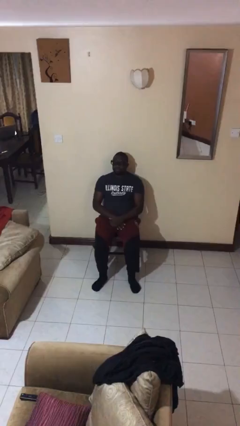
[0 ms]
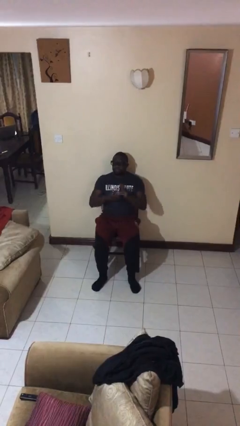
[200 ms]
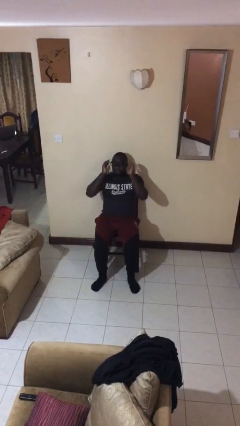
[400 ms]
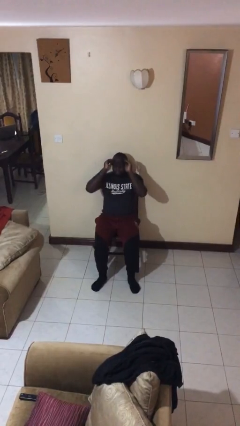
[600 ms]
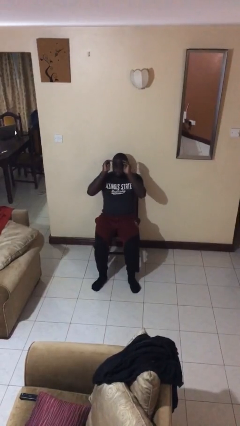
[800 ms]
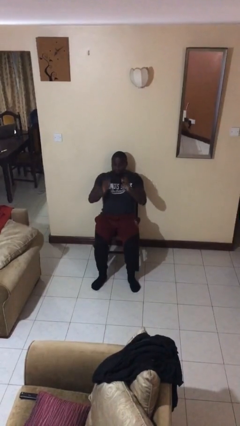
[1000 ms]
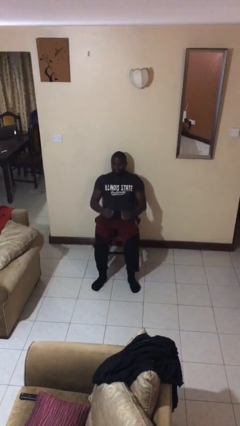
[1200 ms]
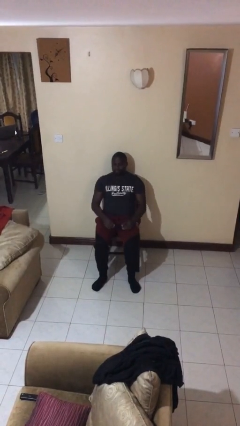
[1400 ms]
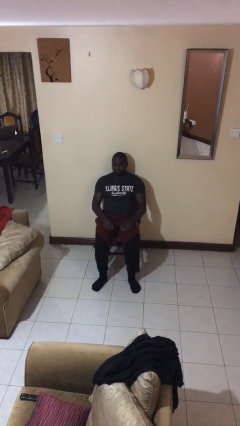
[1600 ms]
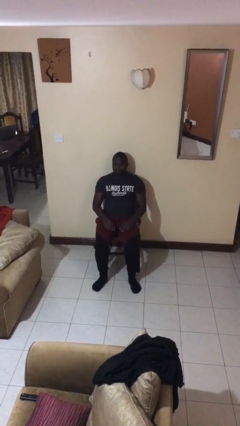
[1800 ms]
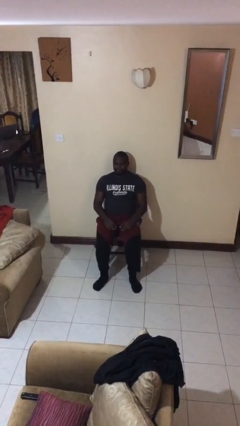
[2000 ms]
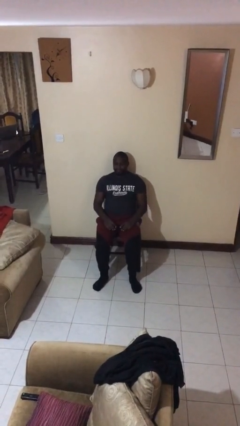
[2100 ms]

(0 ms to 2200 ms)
person takes off glasses

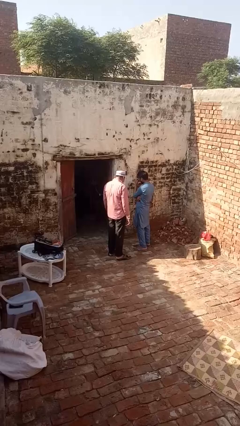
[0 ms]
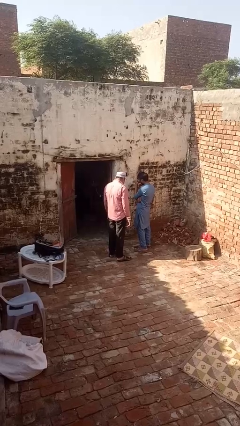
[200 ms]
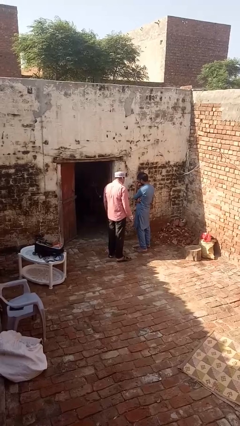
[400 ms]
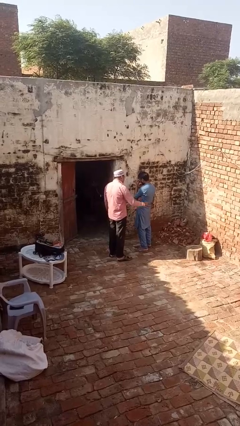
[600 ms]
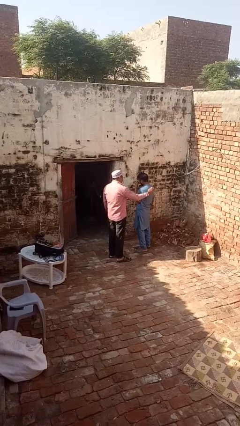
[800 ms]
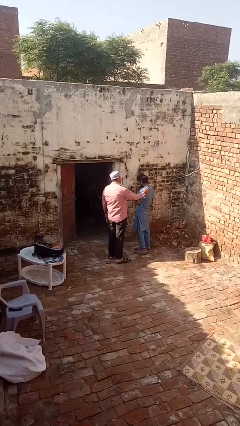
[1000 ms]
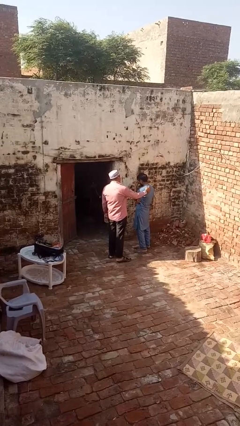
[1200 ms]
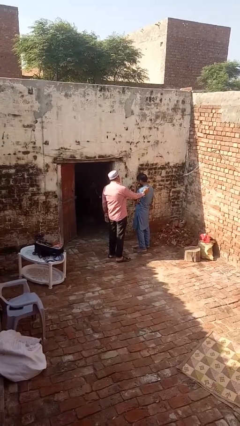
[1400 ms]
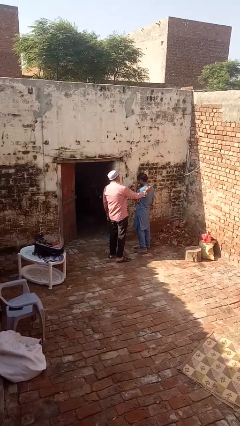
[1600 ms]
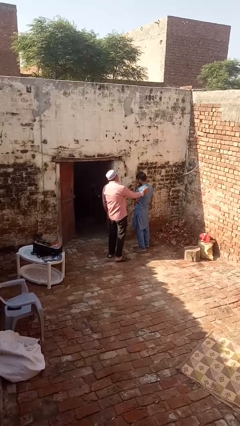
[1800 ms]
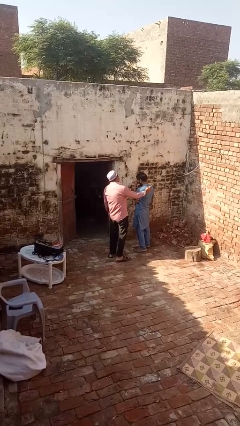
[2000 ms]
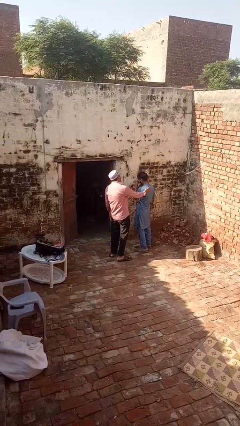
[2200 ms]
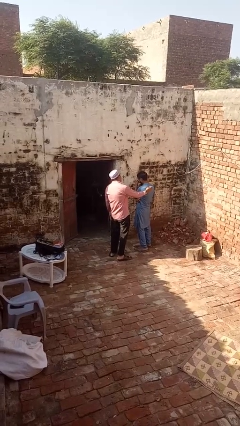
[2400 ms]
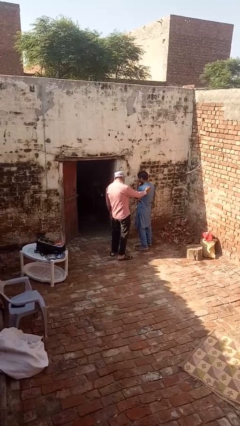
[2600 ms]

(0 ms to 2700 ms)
person laughs with person

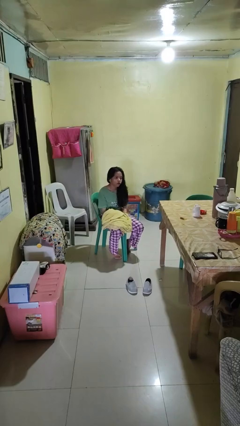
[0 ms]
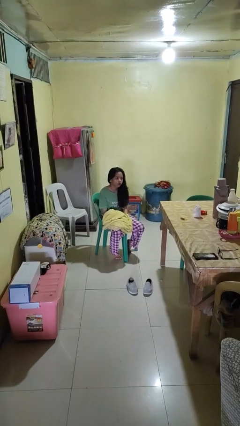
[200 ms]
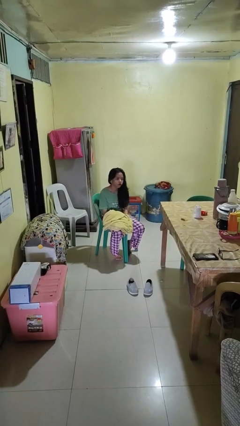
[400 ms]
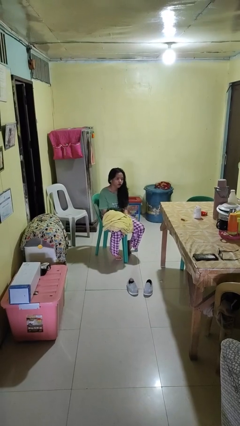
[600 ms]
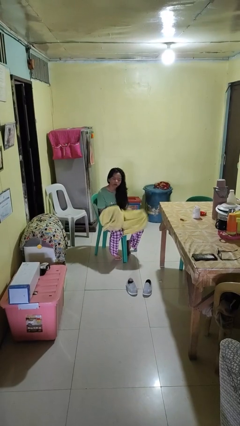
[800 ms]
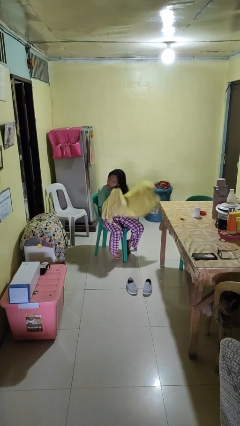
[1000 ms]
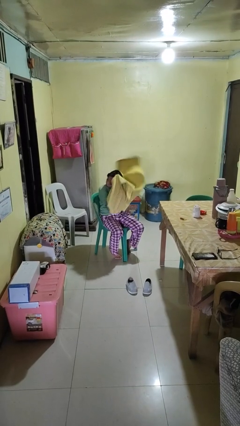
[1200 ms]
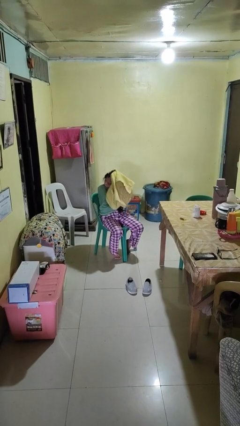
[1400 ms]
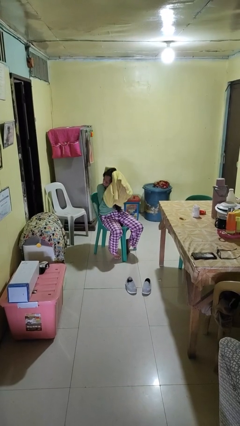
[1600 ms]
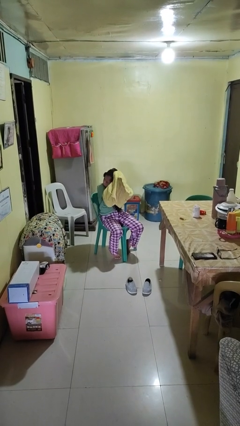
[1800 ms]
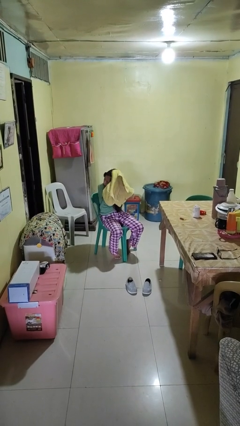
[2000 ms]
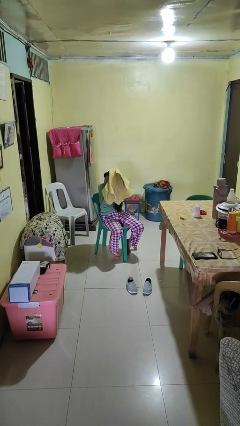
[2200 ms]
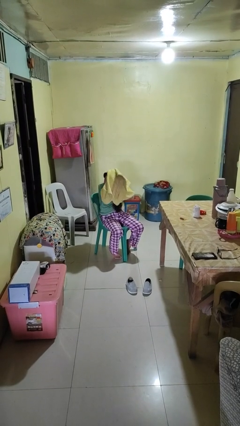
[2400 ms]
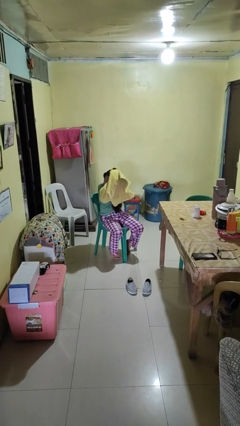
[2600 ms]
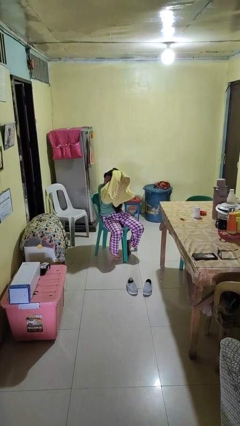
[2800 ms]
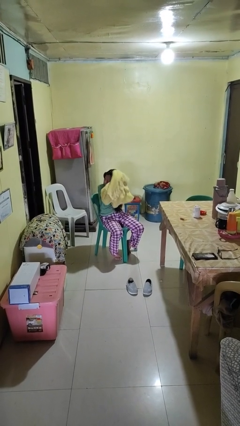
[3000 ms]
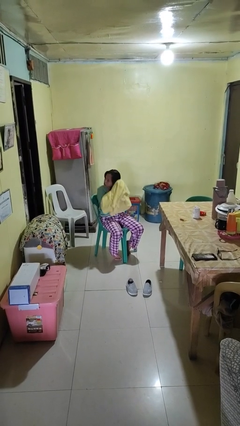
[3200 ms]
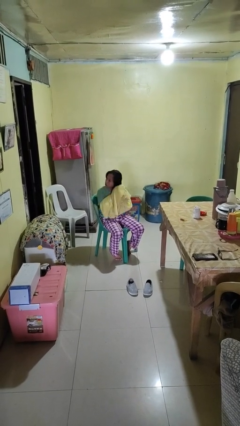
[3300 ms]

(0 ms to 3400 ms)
person dries hair with towel

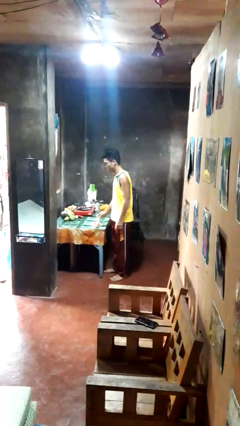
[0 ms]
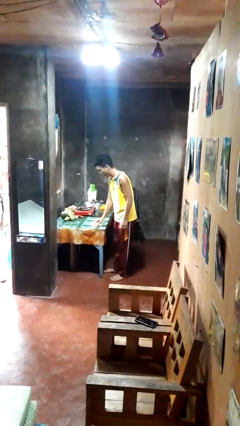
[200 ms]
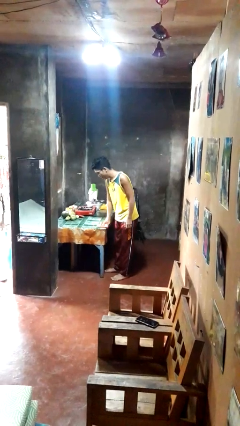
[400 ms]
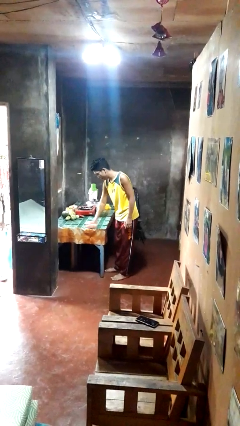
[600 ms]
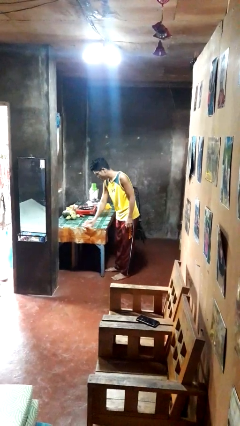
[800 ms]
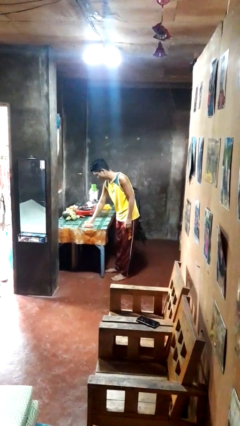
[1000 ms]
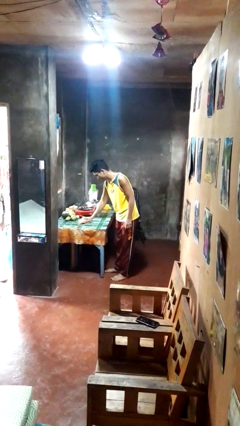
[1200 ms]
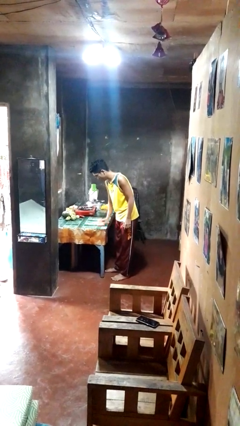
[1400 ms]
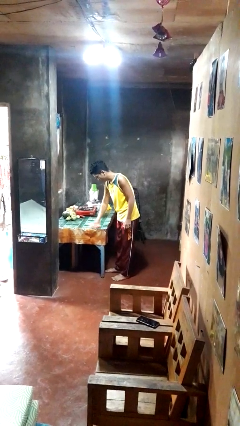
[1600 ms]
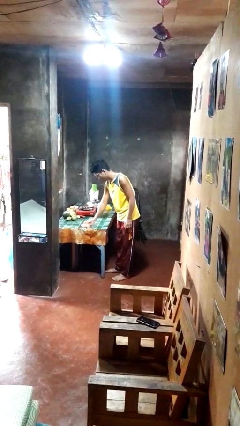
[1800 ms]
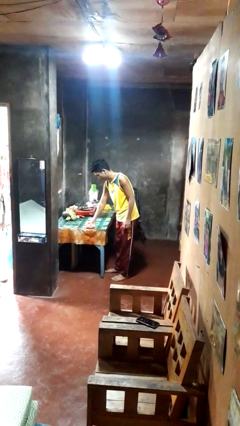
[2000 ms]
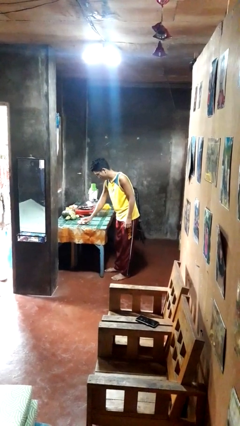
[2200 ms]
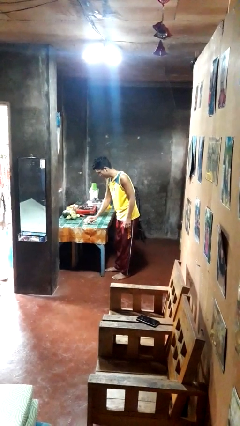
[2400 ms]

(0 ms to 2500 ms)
person cleans table with rag

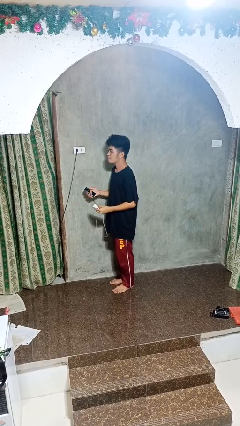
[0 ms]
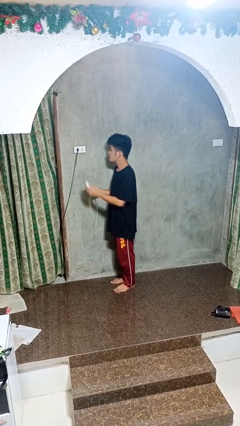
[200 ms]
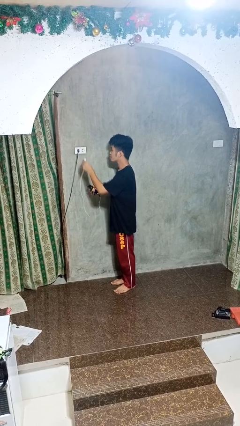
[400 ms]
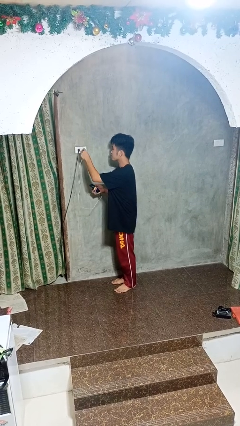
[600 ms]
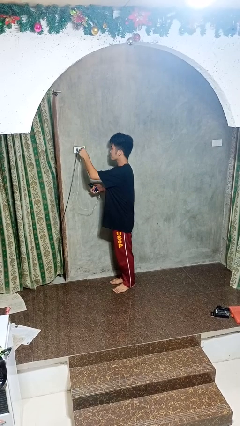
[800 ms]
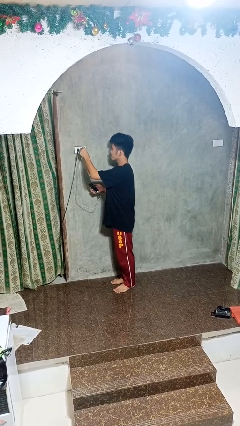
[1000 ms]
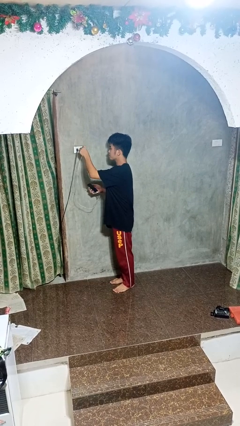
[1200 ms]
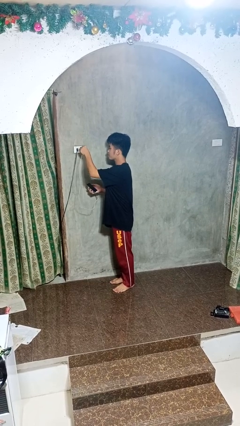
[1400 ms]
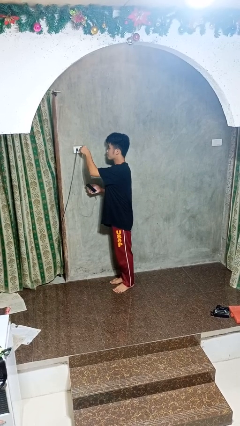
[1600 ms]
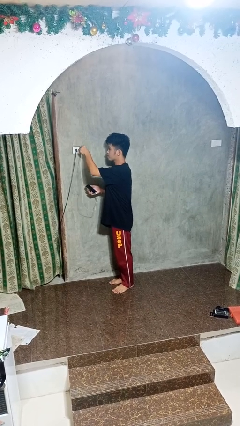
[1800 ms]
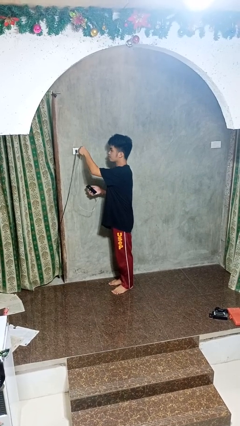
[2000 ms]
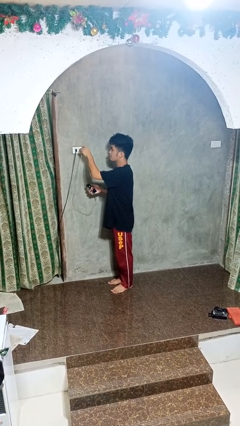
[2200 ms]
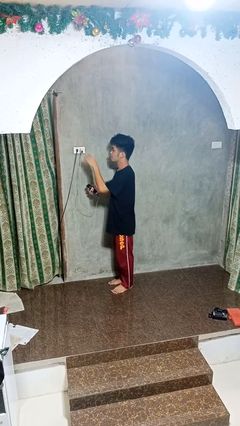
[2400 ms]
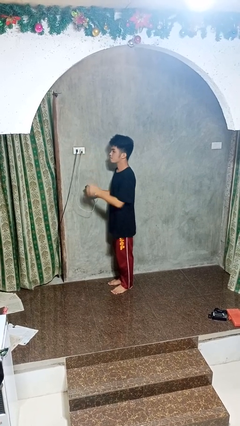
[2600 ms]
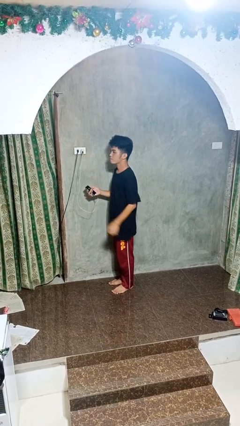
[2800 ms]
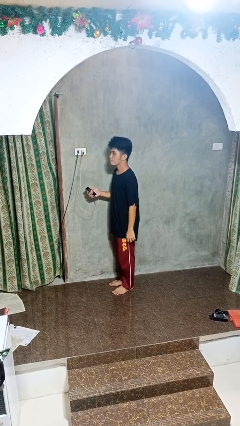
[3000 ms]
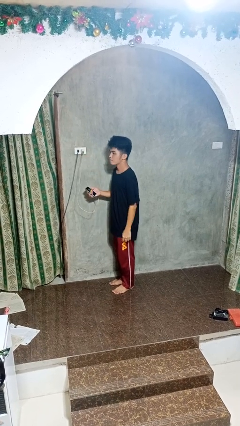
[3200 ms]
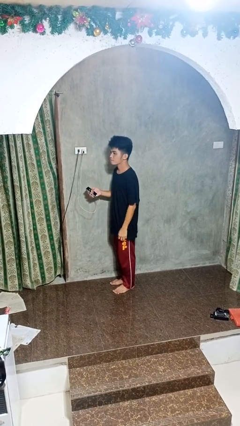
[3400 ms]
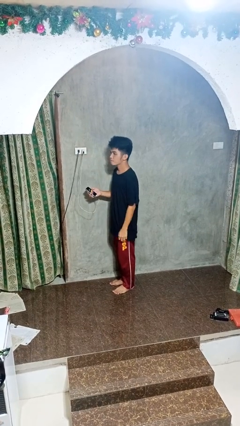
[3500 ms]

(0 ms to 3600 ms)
person plugs into electrical socket

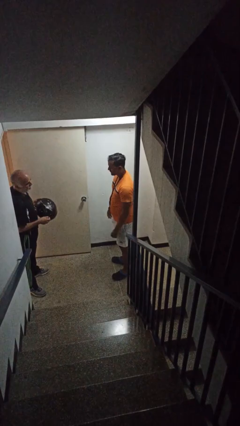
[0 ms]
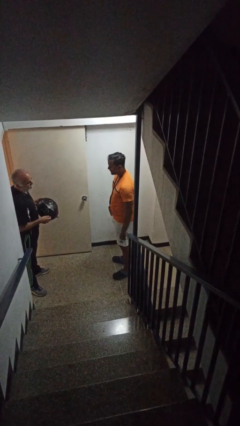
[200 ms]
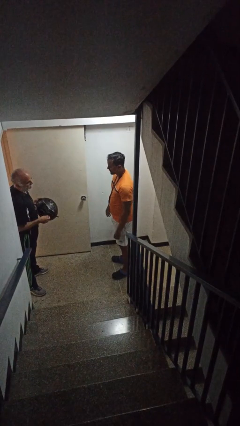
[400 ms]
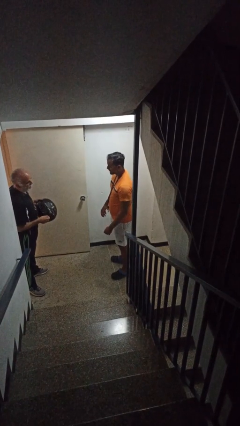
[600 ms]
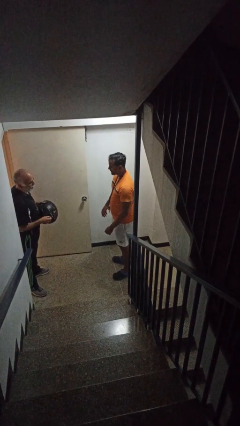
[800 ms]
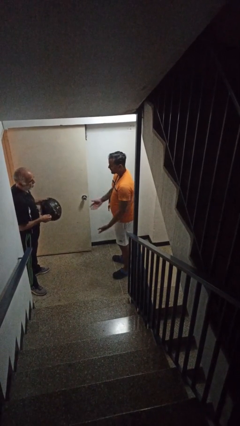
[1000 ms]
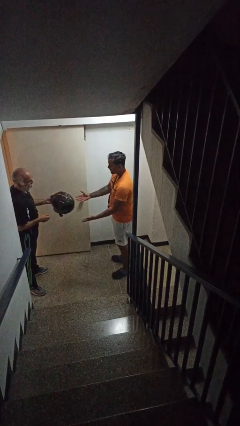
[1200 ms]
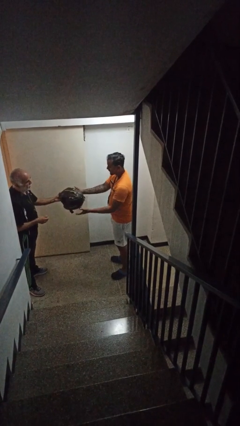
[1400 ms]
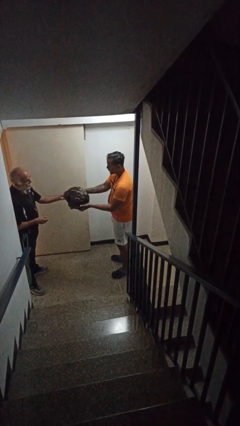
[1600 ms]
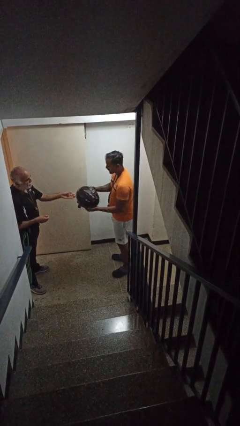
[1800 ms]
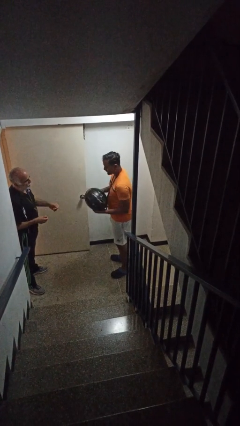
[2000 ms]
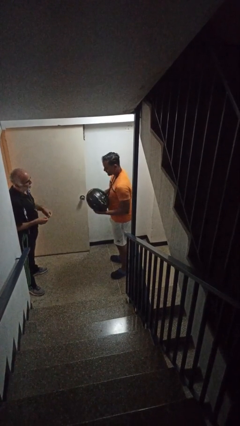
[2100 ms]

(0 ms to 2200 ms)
person transfers object to person

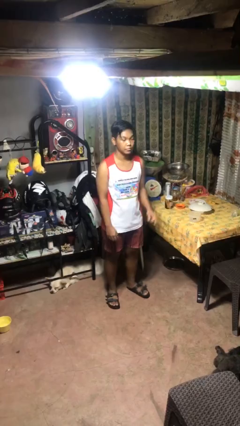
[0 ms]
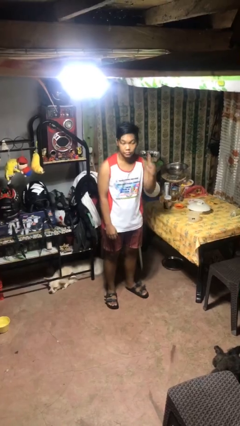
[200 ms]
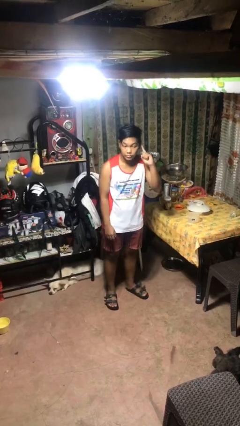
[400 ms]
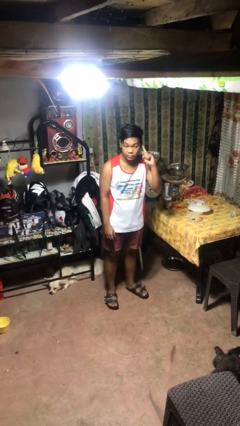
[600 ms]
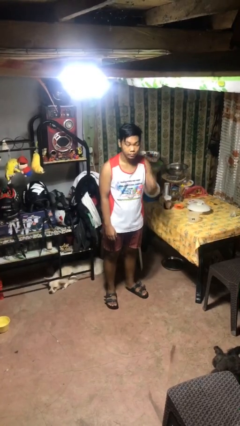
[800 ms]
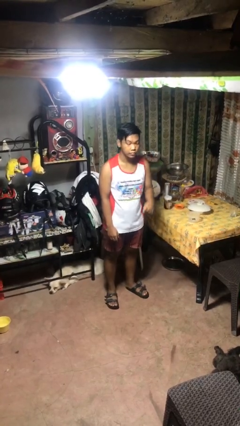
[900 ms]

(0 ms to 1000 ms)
person gestures listen closely
